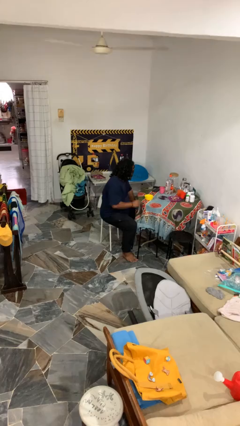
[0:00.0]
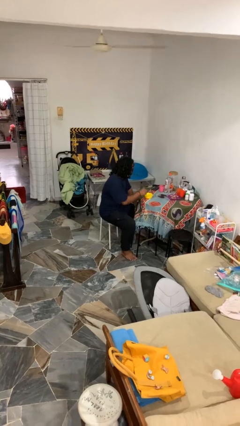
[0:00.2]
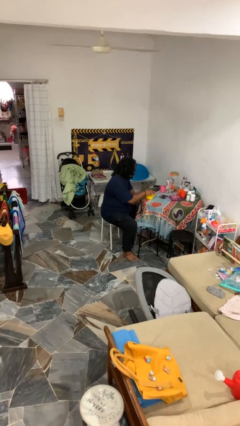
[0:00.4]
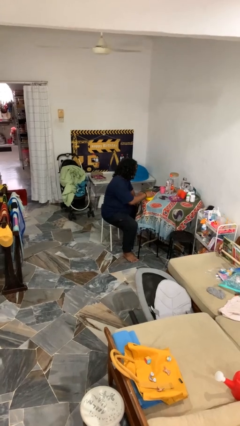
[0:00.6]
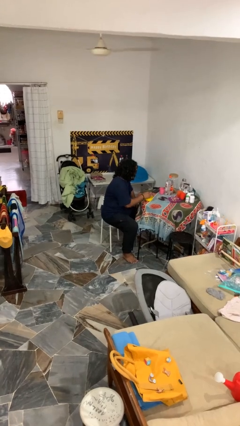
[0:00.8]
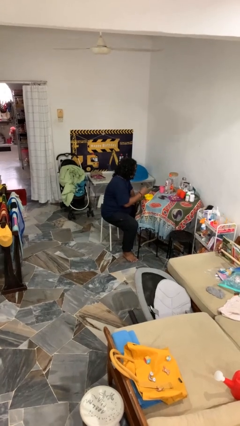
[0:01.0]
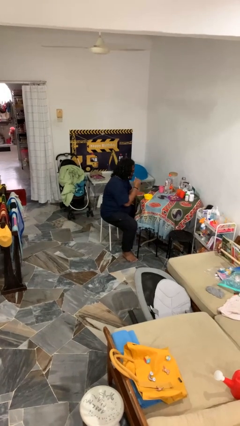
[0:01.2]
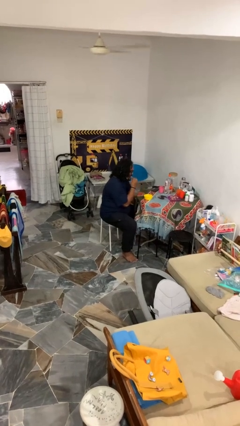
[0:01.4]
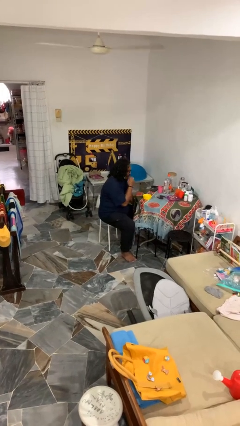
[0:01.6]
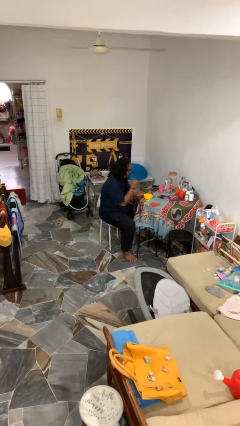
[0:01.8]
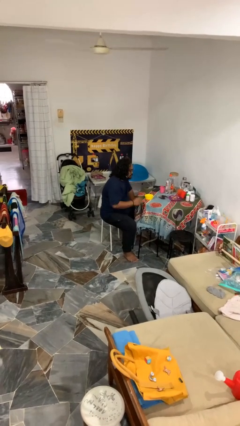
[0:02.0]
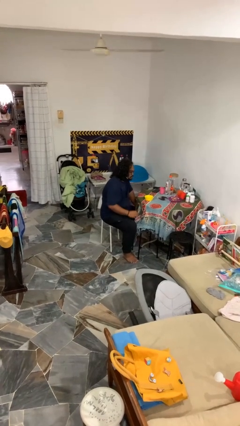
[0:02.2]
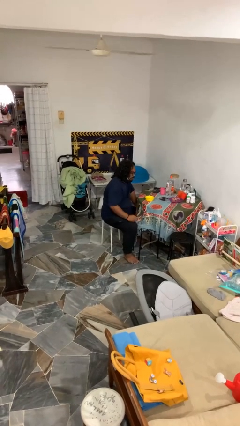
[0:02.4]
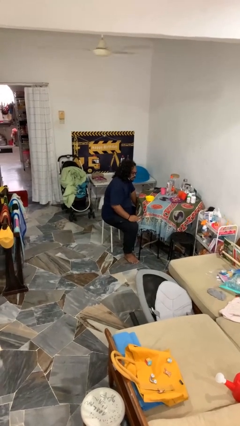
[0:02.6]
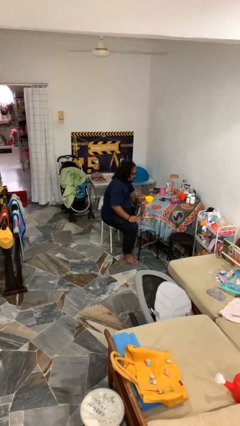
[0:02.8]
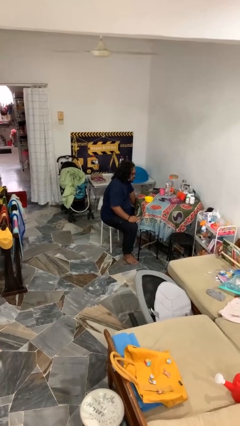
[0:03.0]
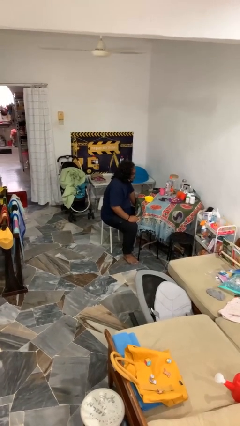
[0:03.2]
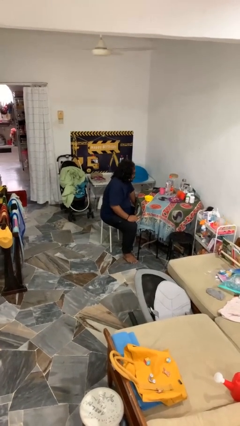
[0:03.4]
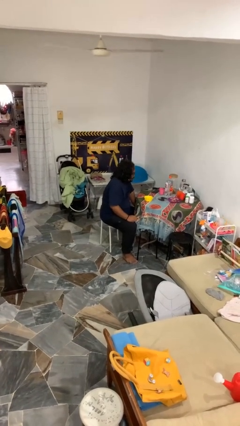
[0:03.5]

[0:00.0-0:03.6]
person eats with hands

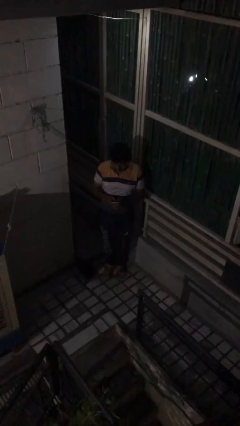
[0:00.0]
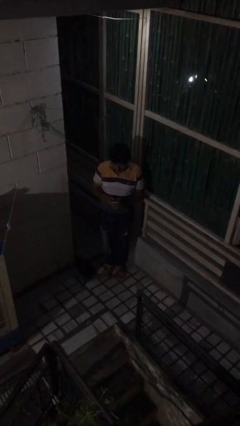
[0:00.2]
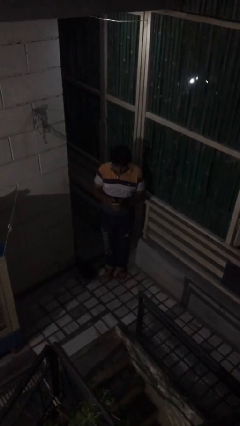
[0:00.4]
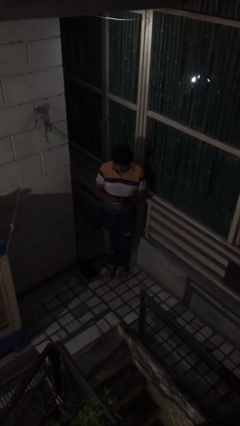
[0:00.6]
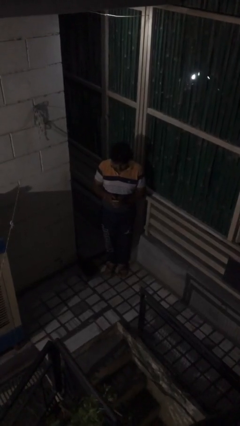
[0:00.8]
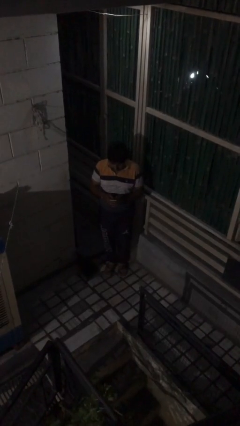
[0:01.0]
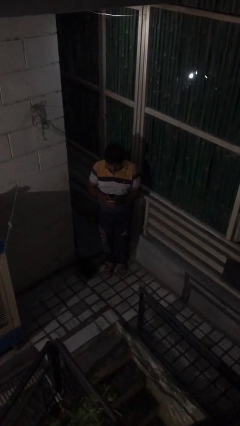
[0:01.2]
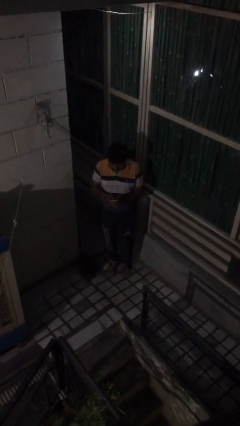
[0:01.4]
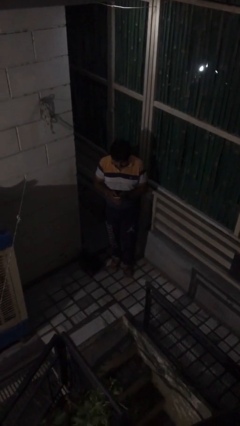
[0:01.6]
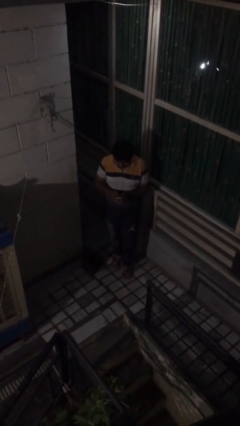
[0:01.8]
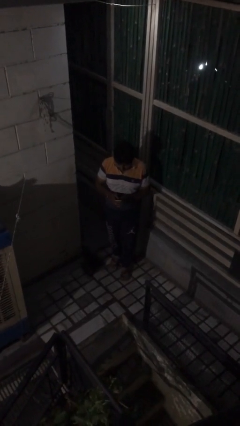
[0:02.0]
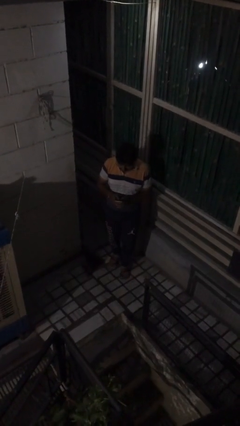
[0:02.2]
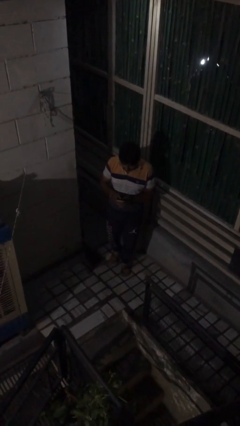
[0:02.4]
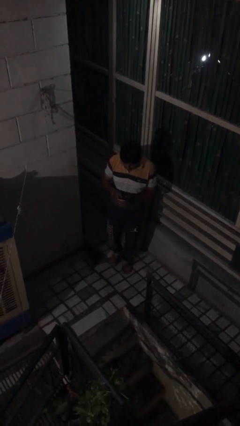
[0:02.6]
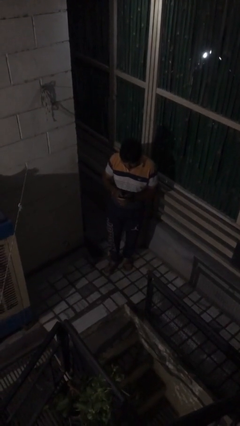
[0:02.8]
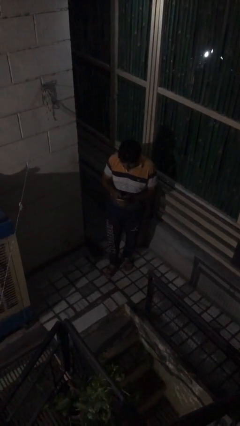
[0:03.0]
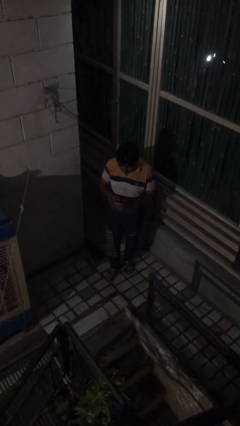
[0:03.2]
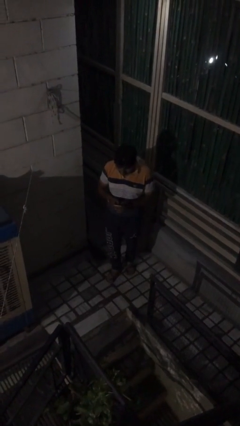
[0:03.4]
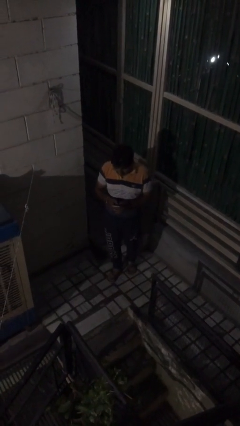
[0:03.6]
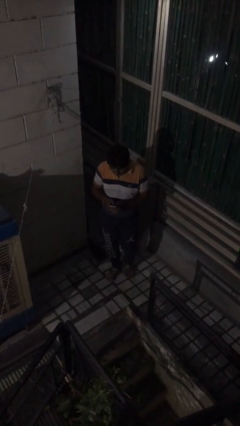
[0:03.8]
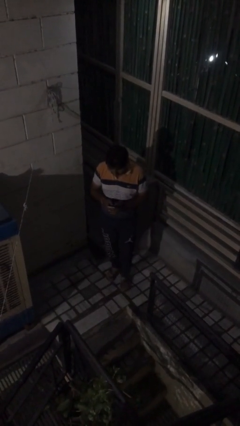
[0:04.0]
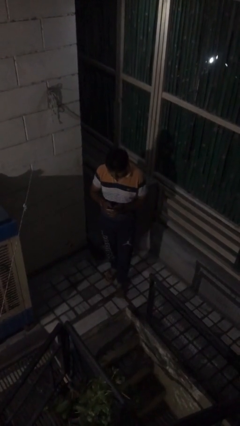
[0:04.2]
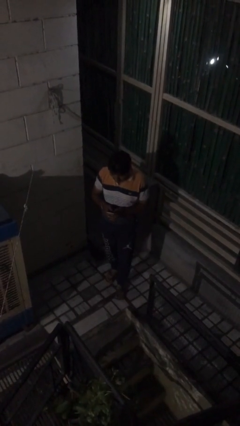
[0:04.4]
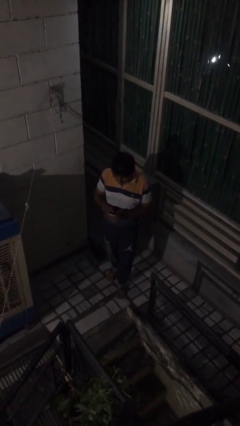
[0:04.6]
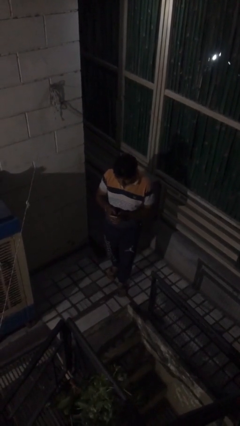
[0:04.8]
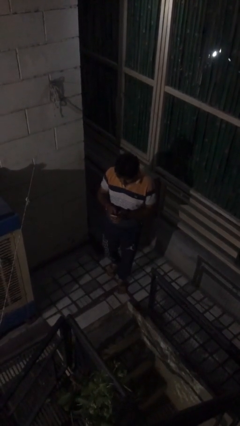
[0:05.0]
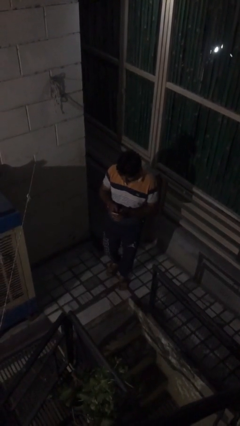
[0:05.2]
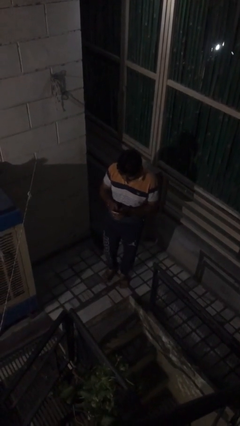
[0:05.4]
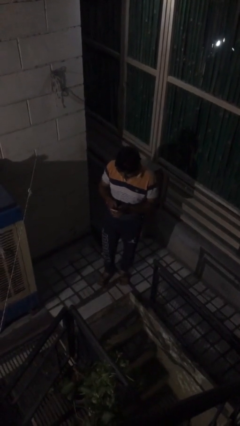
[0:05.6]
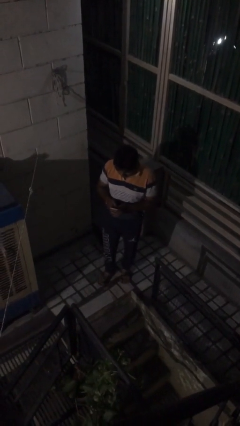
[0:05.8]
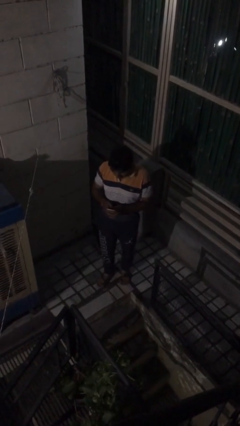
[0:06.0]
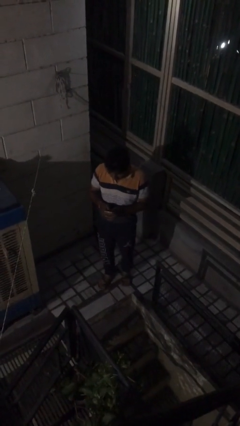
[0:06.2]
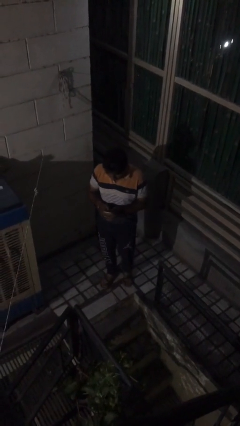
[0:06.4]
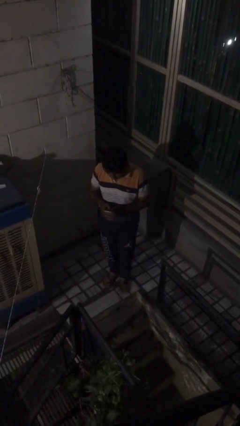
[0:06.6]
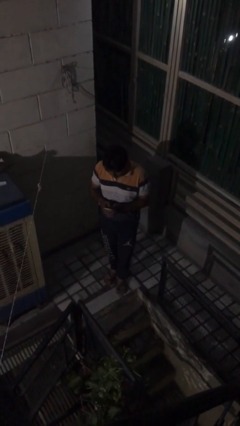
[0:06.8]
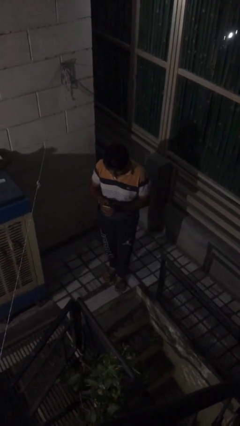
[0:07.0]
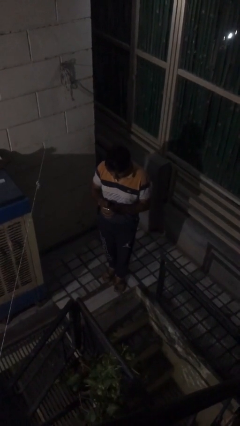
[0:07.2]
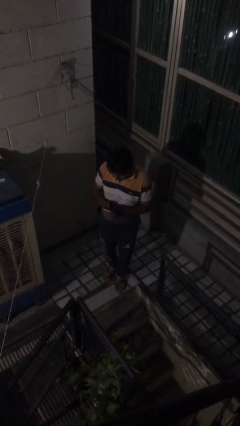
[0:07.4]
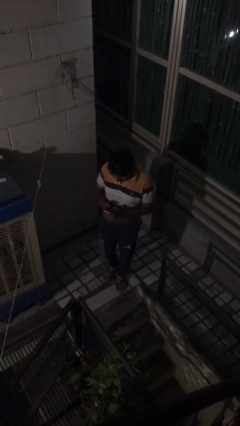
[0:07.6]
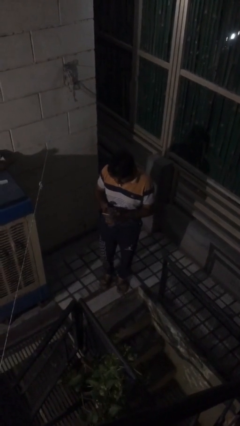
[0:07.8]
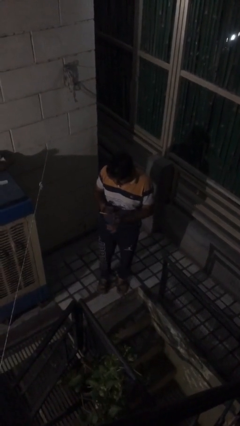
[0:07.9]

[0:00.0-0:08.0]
person texts on phone

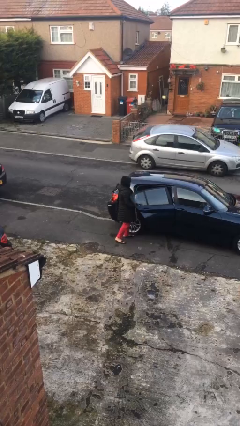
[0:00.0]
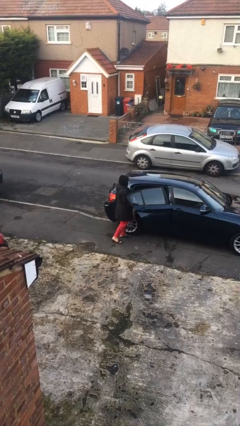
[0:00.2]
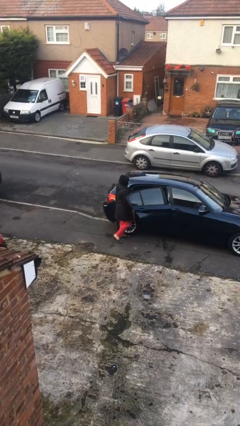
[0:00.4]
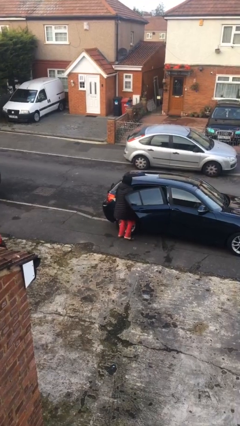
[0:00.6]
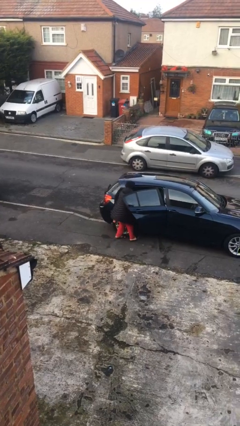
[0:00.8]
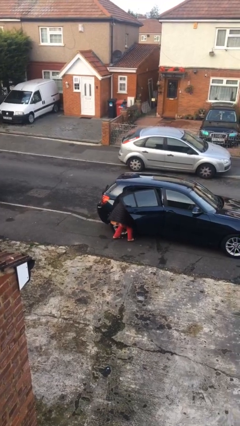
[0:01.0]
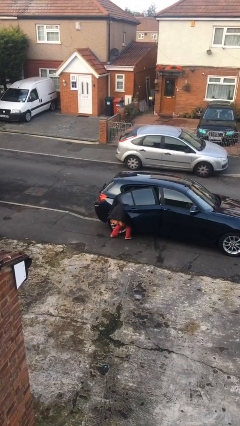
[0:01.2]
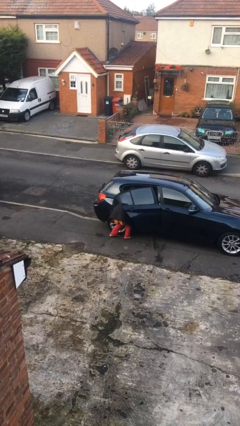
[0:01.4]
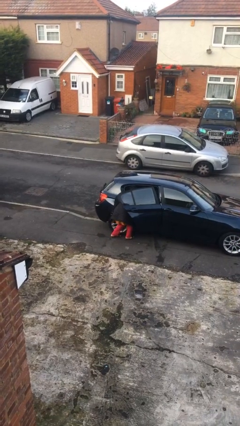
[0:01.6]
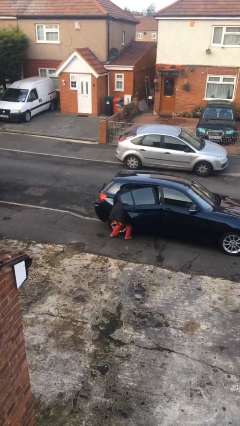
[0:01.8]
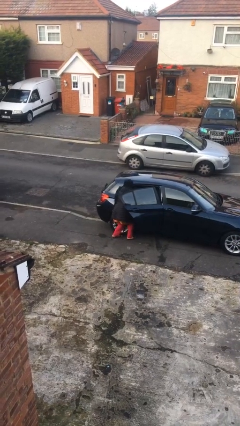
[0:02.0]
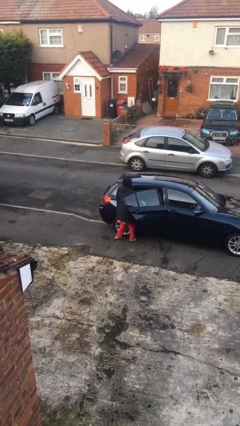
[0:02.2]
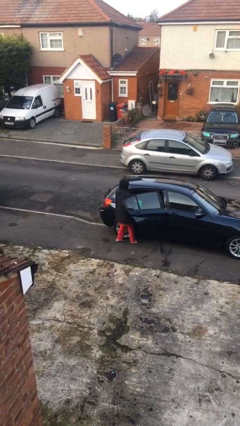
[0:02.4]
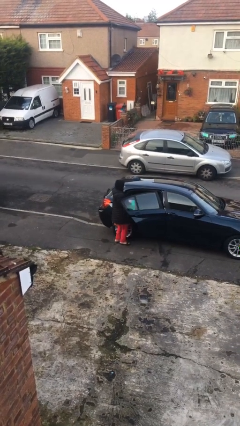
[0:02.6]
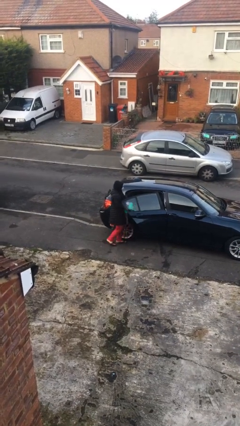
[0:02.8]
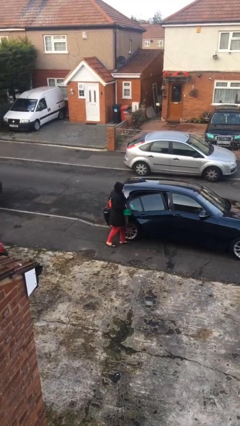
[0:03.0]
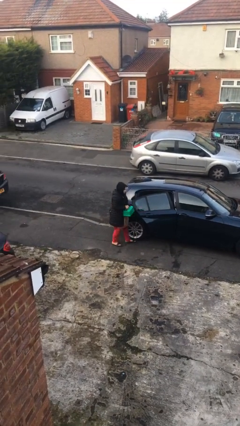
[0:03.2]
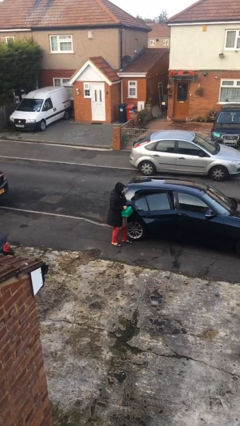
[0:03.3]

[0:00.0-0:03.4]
person unloads car

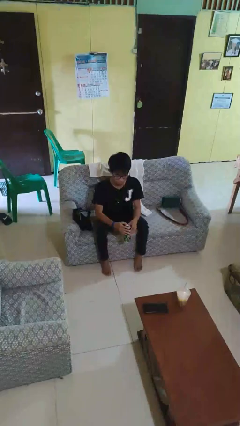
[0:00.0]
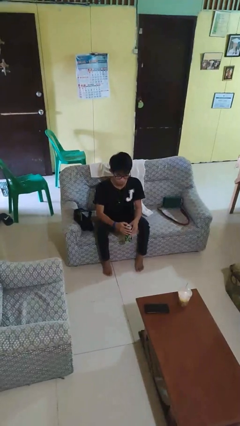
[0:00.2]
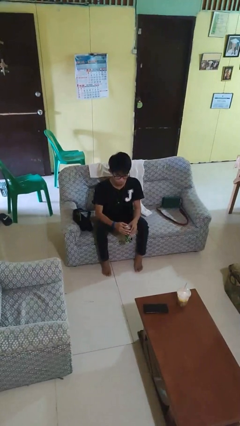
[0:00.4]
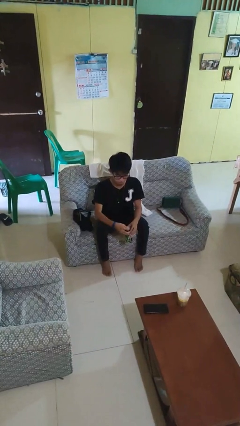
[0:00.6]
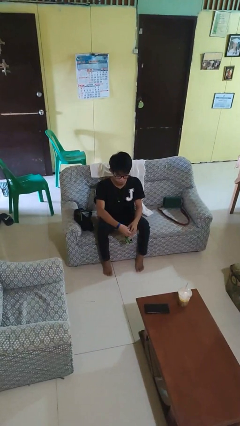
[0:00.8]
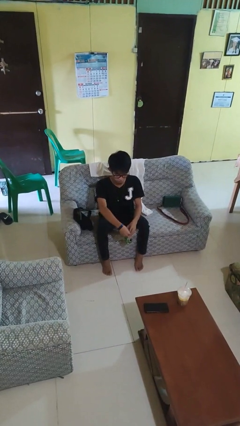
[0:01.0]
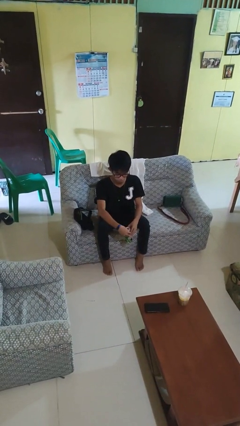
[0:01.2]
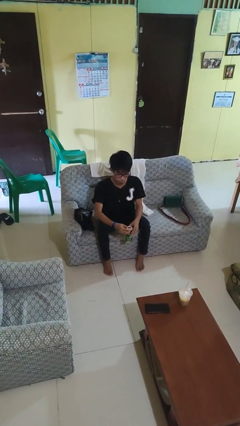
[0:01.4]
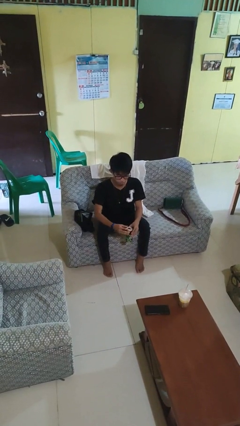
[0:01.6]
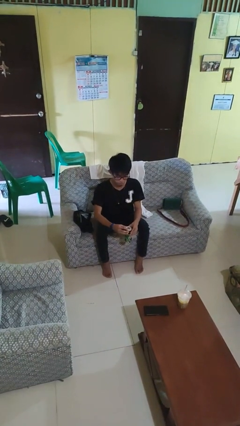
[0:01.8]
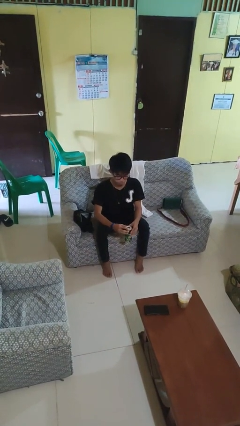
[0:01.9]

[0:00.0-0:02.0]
person opens beverage can

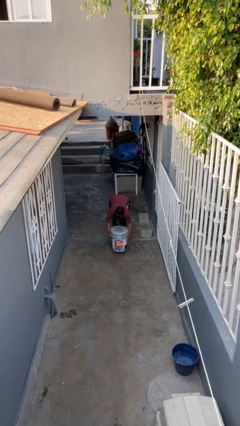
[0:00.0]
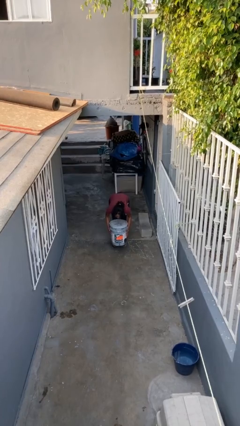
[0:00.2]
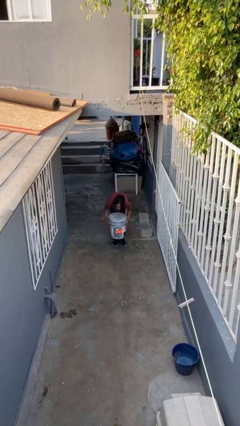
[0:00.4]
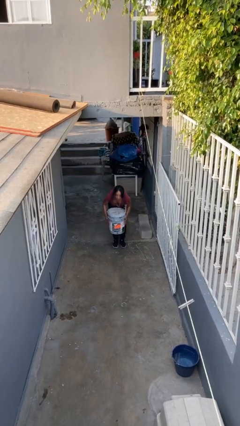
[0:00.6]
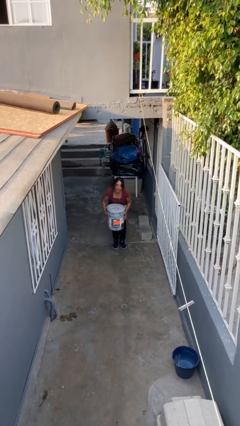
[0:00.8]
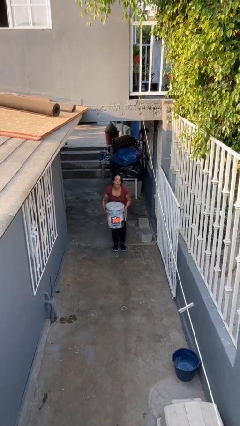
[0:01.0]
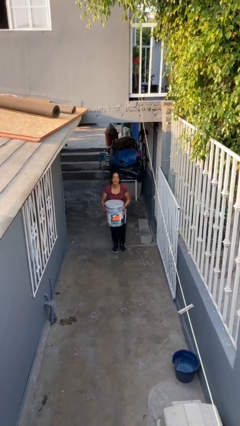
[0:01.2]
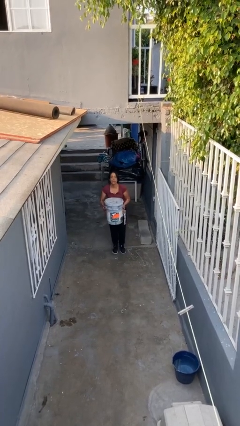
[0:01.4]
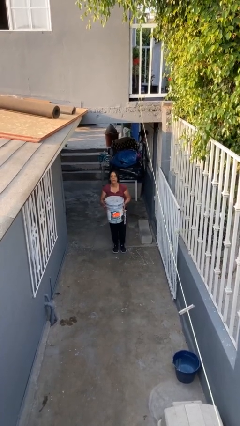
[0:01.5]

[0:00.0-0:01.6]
person picks up object from floor
